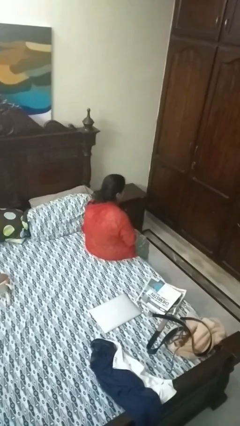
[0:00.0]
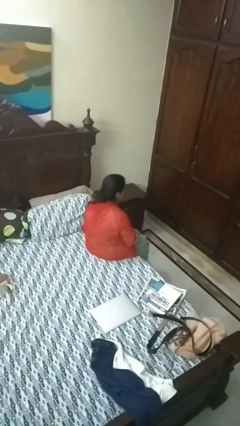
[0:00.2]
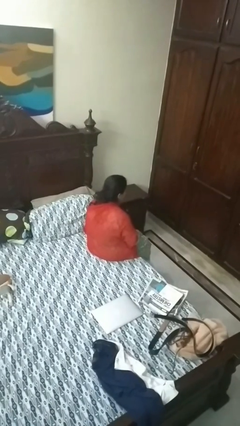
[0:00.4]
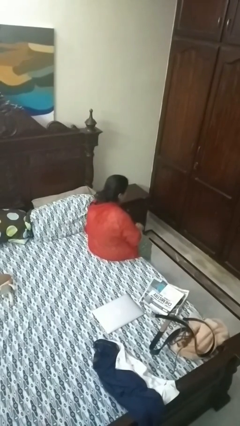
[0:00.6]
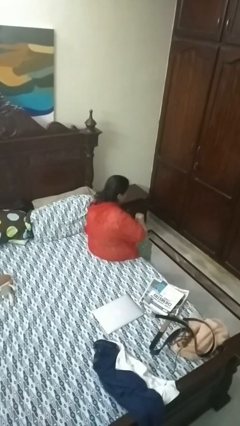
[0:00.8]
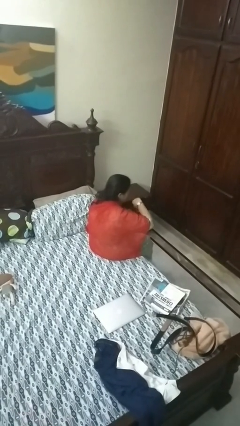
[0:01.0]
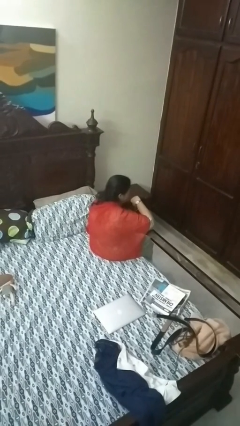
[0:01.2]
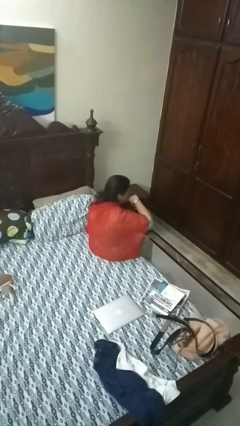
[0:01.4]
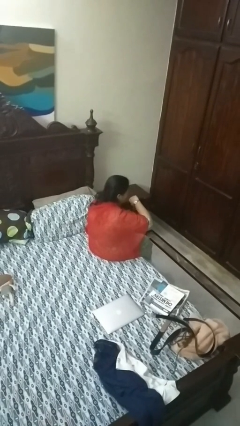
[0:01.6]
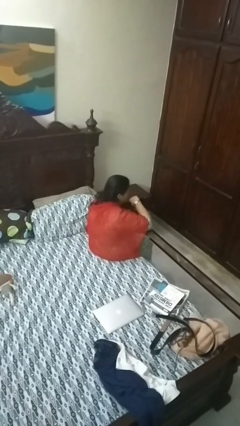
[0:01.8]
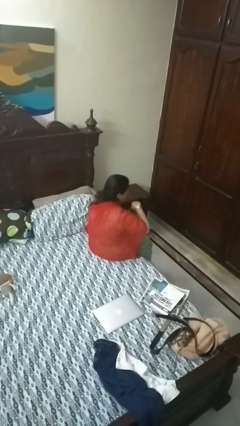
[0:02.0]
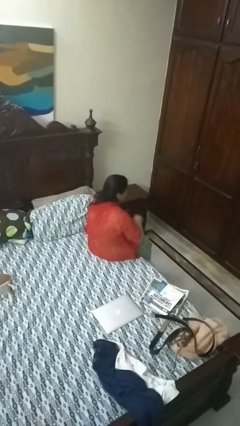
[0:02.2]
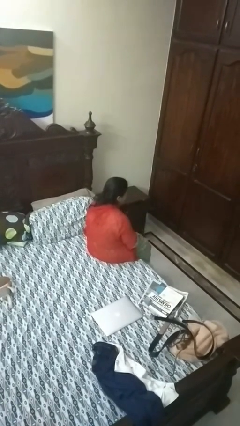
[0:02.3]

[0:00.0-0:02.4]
person looks at wristwatch

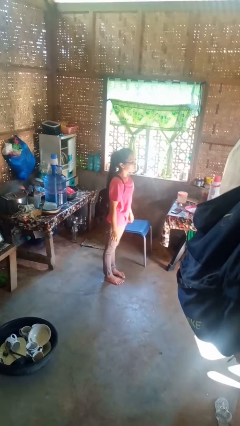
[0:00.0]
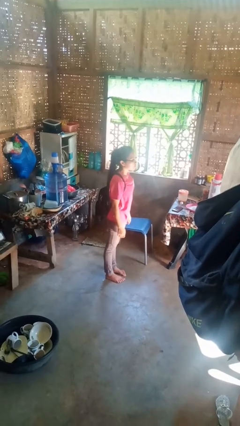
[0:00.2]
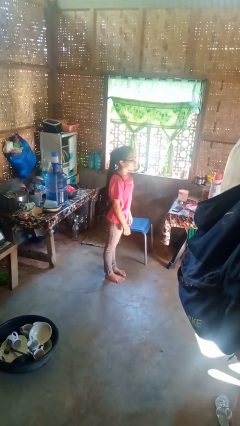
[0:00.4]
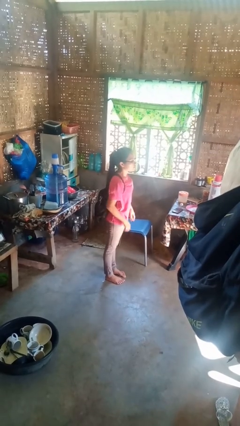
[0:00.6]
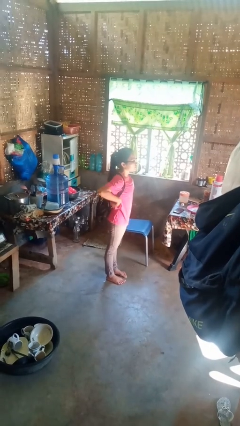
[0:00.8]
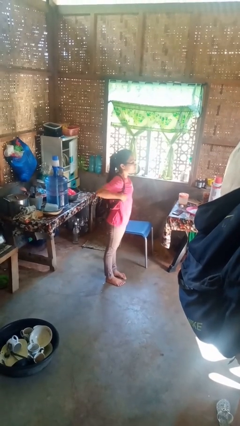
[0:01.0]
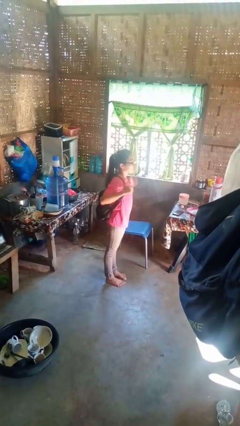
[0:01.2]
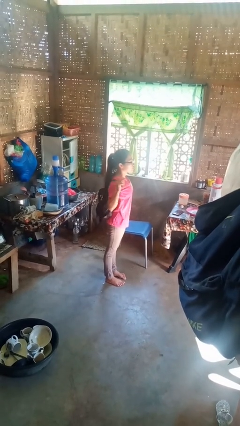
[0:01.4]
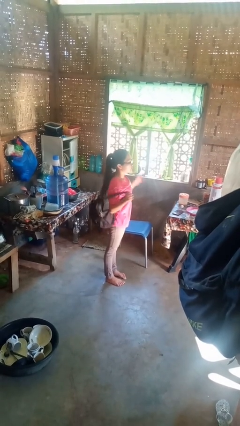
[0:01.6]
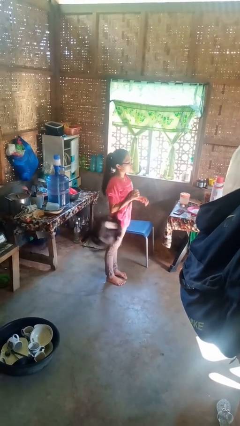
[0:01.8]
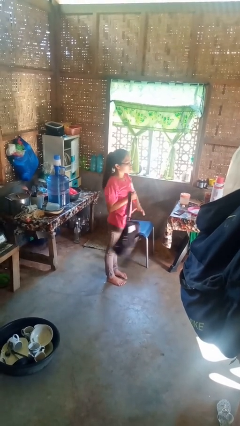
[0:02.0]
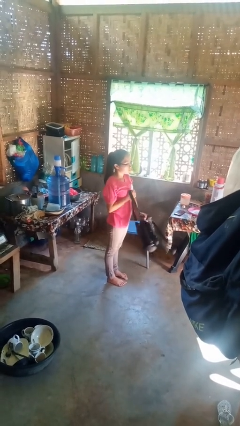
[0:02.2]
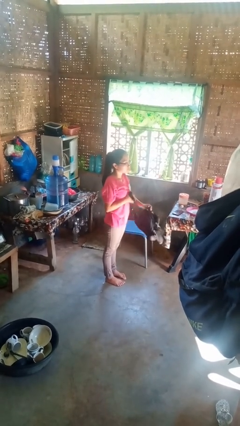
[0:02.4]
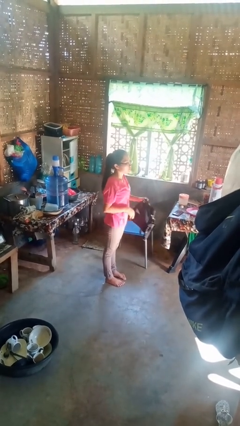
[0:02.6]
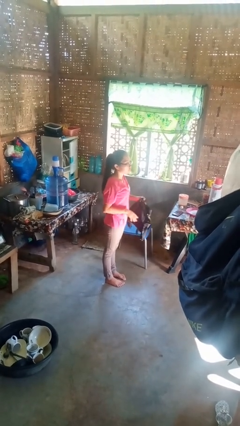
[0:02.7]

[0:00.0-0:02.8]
person takes off backpack

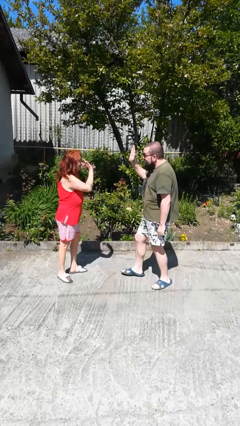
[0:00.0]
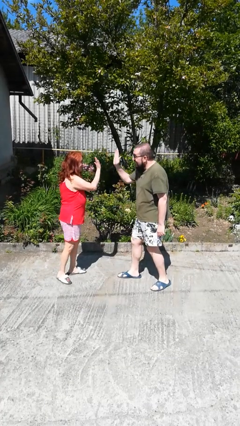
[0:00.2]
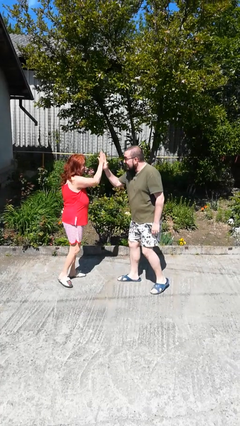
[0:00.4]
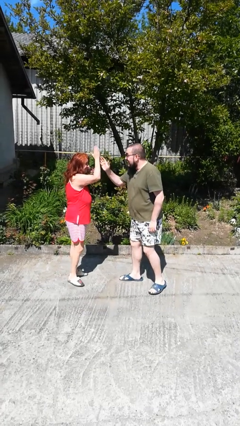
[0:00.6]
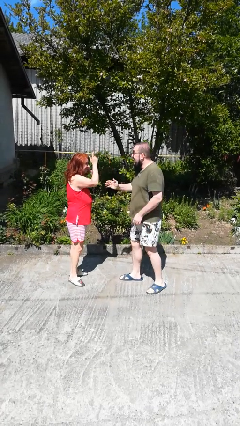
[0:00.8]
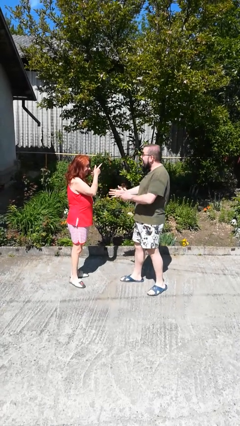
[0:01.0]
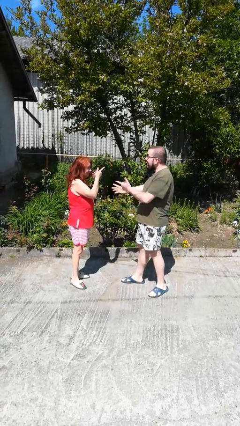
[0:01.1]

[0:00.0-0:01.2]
person highfives hand

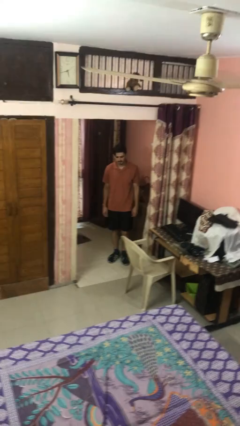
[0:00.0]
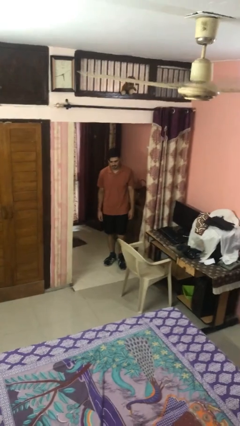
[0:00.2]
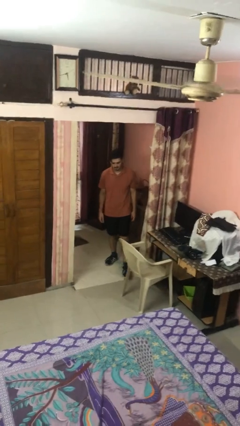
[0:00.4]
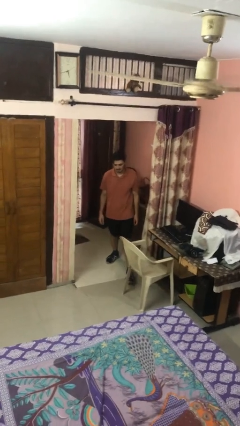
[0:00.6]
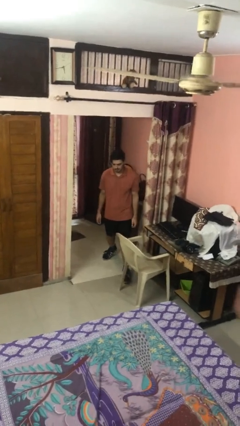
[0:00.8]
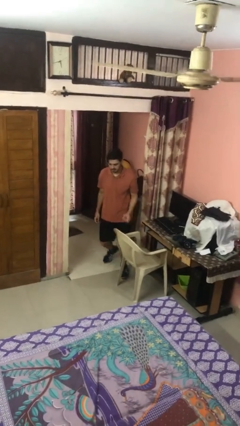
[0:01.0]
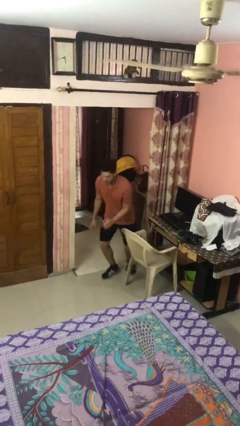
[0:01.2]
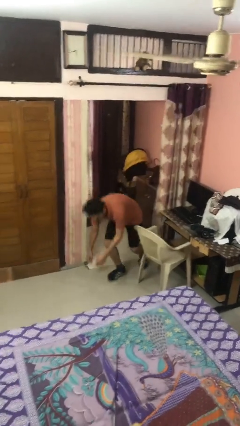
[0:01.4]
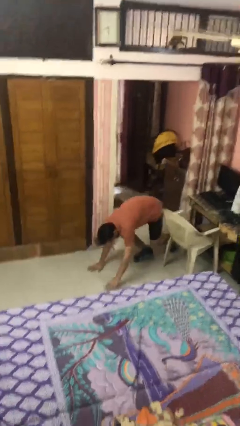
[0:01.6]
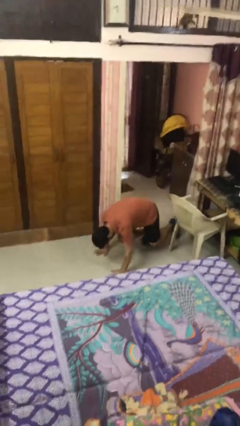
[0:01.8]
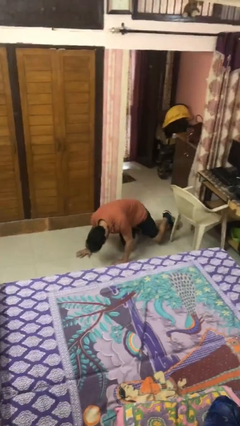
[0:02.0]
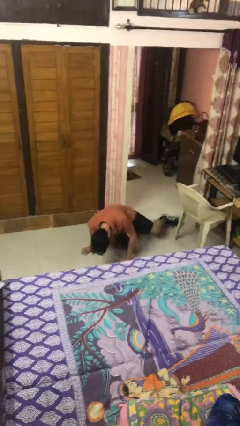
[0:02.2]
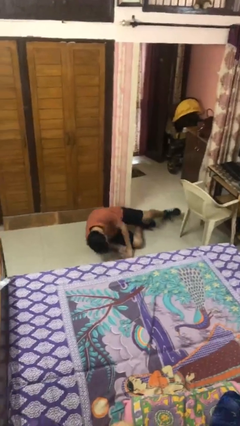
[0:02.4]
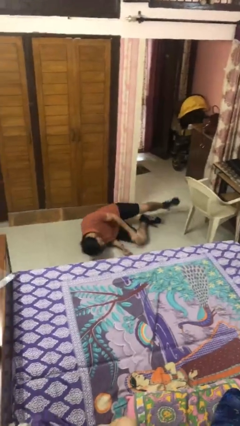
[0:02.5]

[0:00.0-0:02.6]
person trips on object on floor

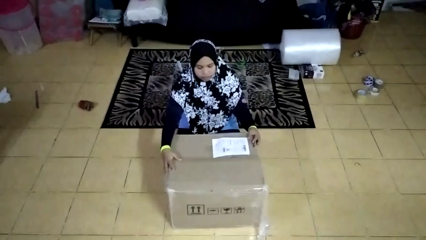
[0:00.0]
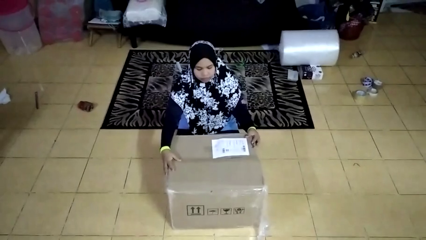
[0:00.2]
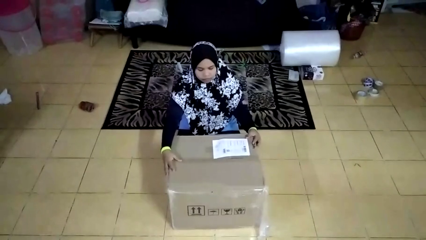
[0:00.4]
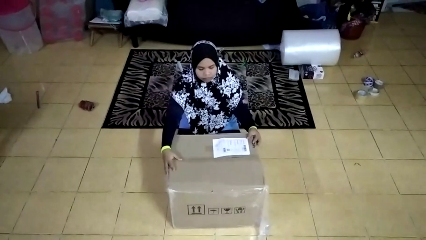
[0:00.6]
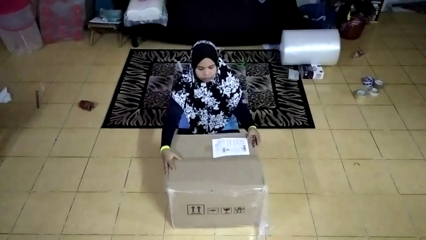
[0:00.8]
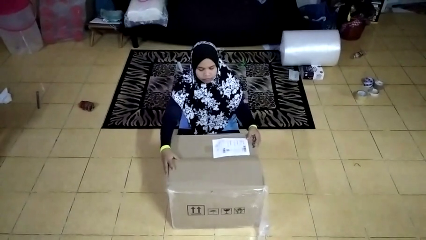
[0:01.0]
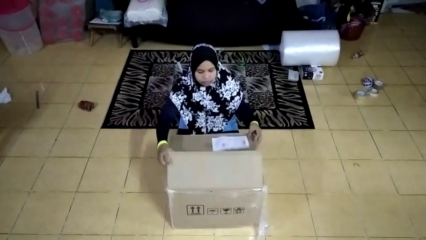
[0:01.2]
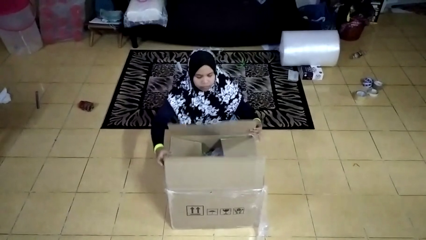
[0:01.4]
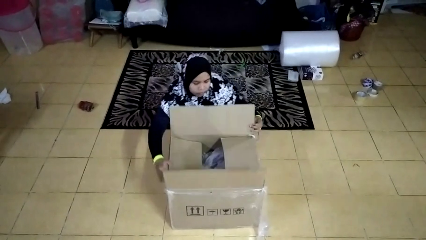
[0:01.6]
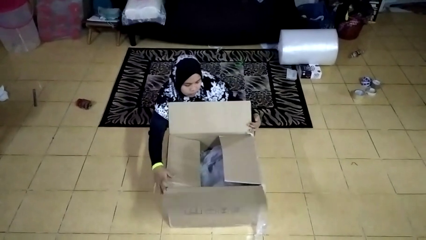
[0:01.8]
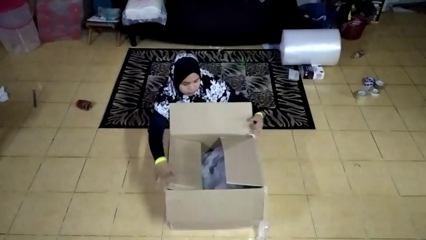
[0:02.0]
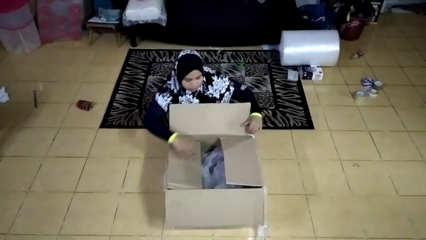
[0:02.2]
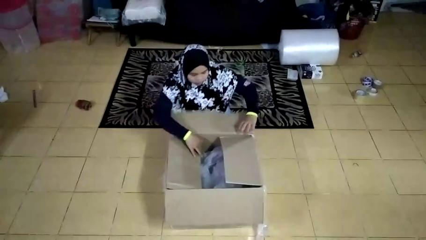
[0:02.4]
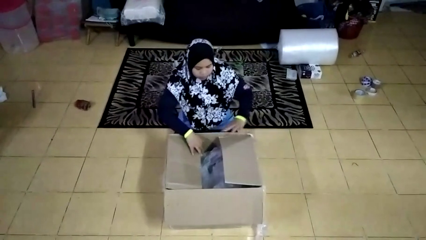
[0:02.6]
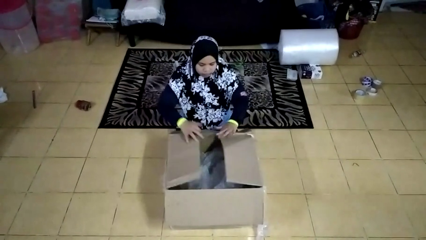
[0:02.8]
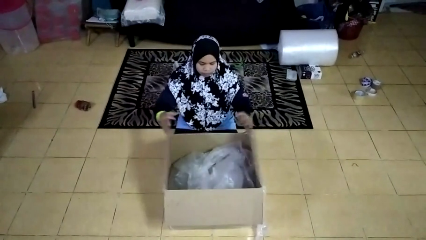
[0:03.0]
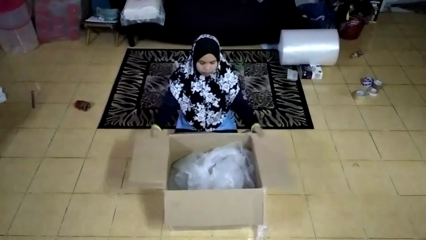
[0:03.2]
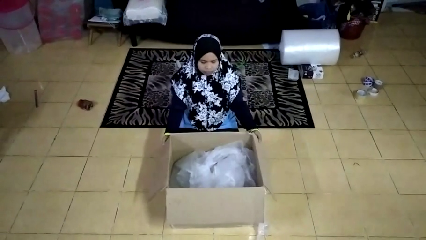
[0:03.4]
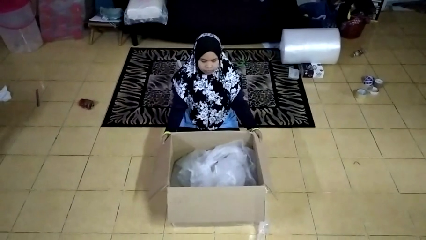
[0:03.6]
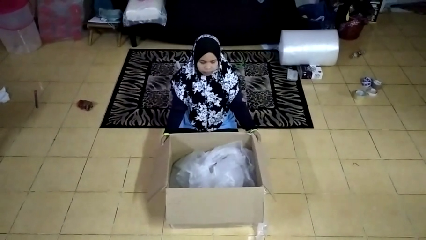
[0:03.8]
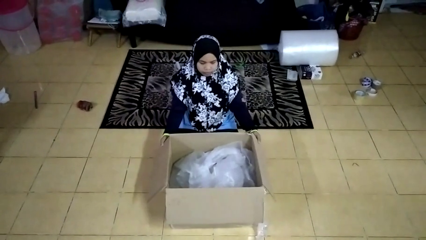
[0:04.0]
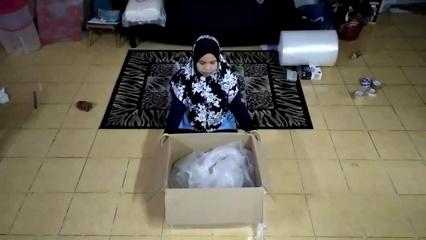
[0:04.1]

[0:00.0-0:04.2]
person opens box

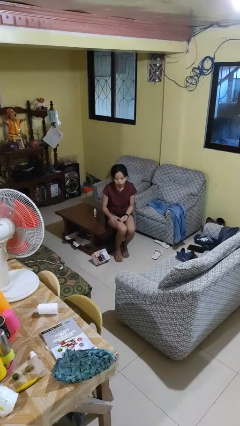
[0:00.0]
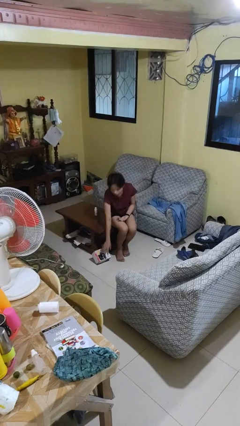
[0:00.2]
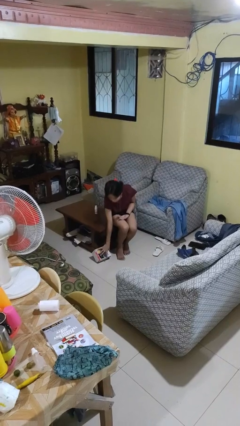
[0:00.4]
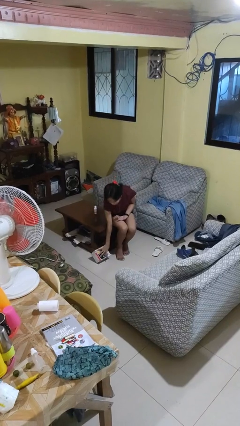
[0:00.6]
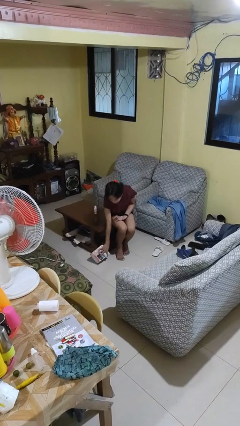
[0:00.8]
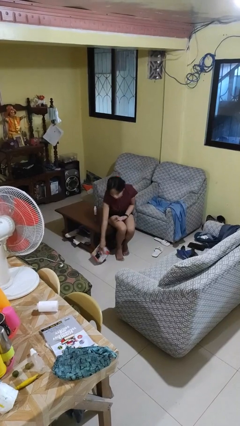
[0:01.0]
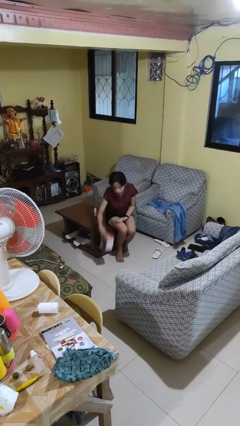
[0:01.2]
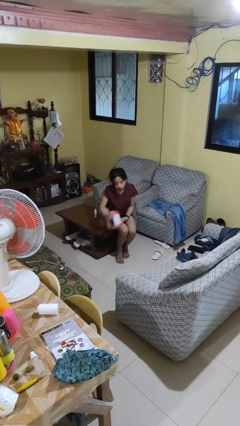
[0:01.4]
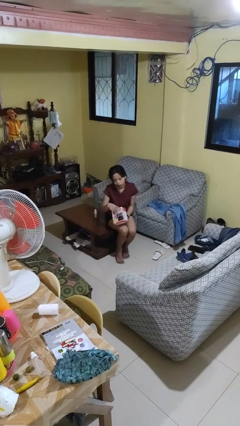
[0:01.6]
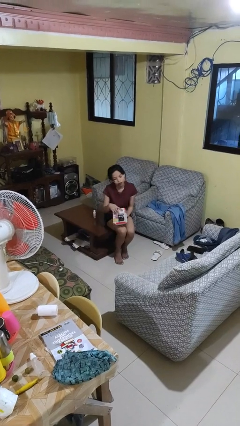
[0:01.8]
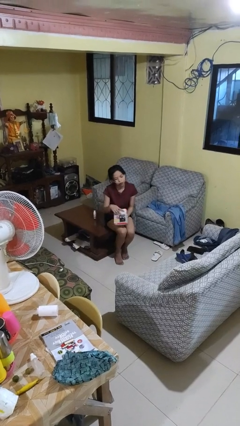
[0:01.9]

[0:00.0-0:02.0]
person picks up object from floor

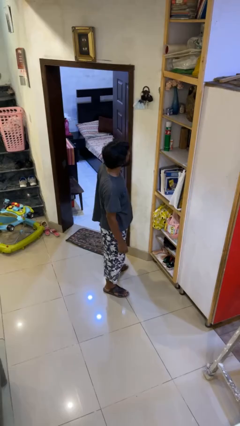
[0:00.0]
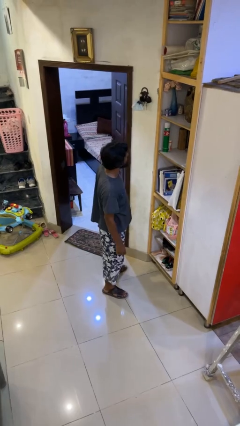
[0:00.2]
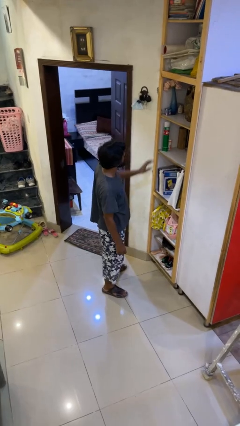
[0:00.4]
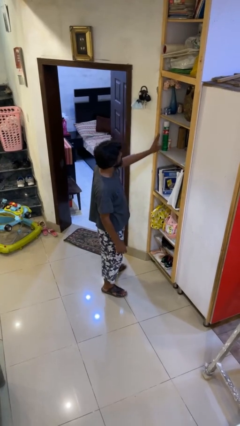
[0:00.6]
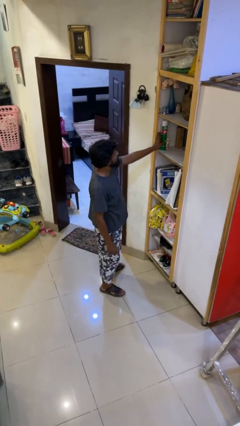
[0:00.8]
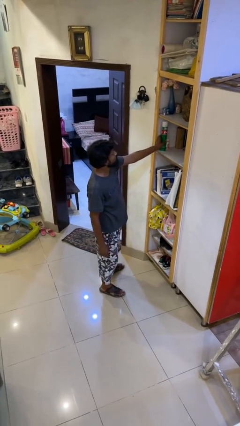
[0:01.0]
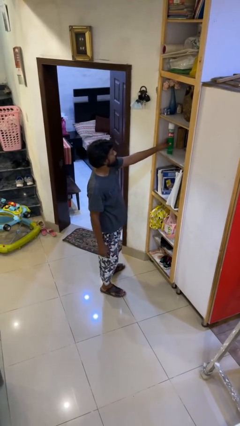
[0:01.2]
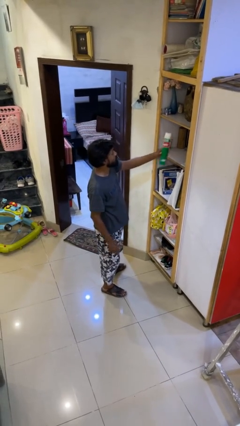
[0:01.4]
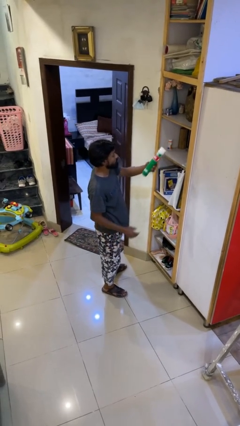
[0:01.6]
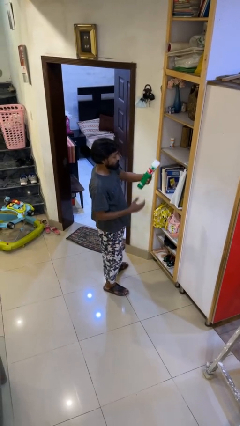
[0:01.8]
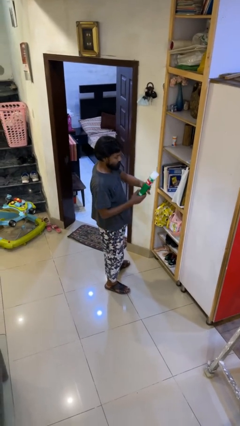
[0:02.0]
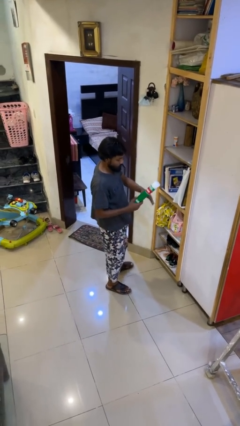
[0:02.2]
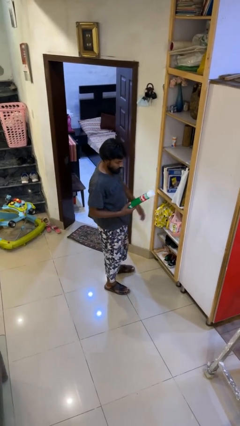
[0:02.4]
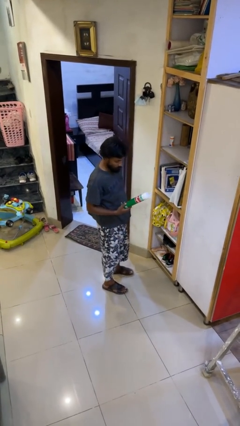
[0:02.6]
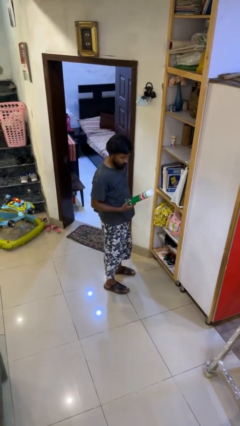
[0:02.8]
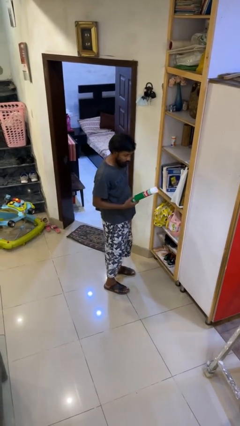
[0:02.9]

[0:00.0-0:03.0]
person picks up object from cabinet
